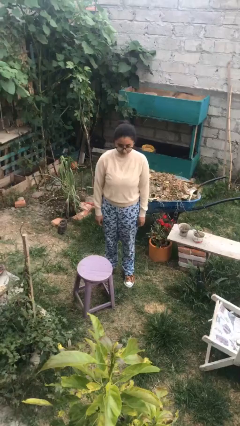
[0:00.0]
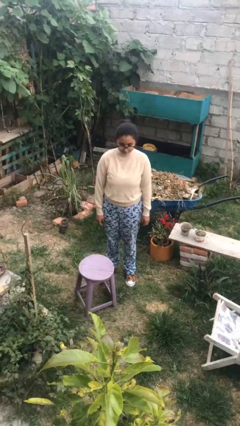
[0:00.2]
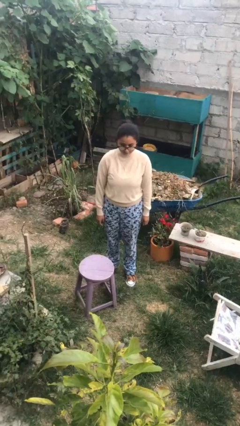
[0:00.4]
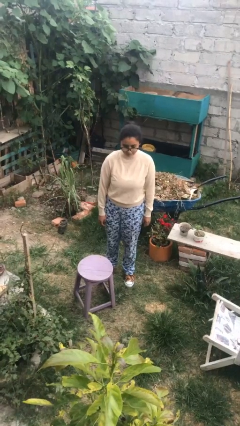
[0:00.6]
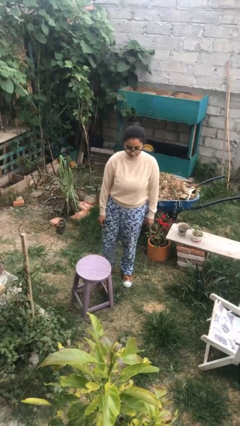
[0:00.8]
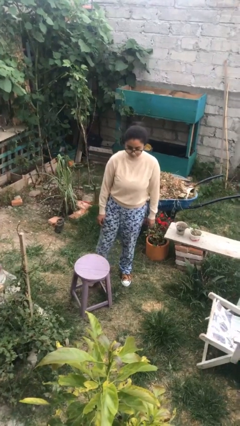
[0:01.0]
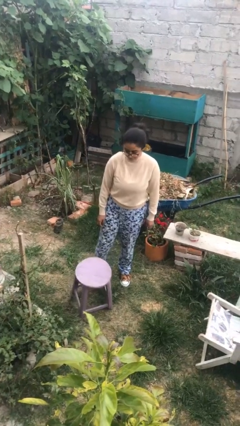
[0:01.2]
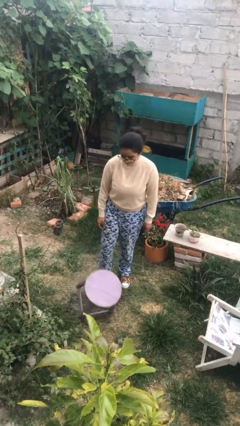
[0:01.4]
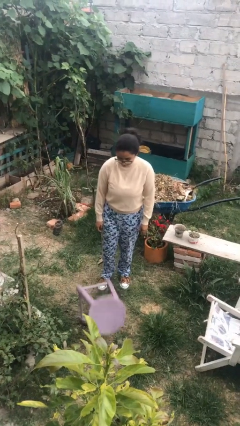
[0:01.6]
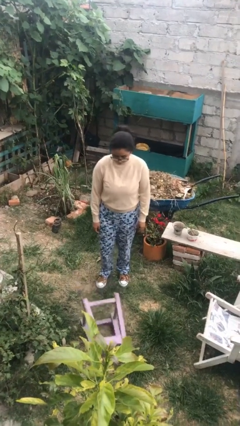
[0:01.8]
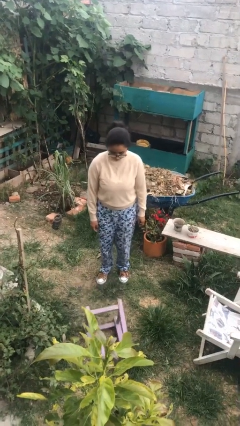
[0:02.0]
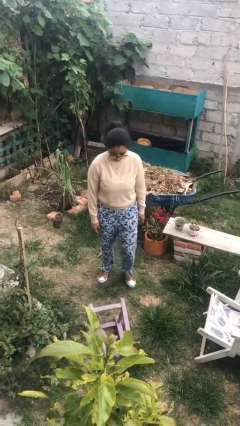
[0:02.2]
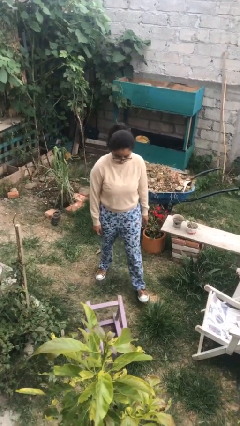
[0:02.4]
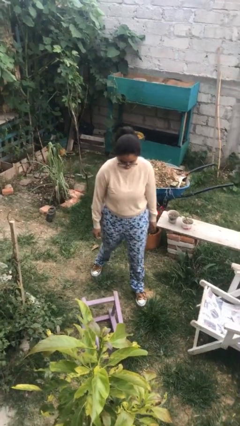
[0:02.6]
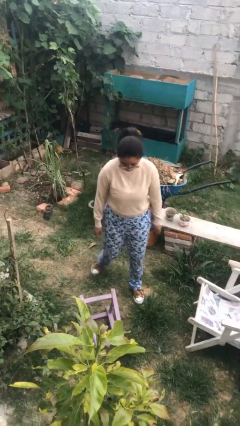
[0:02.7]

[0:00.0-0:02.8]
person knocks over furniture

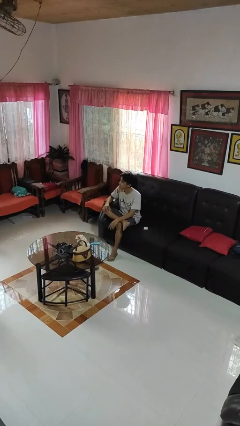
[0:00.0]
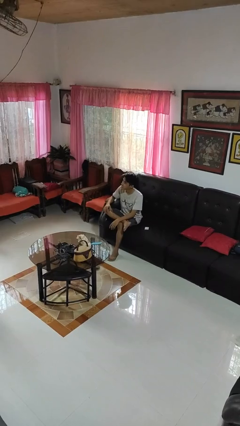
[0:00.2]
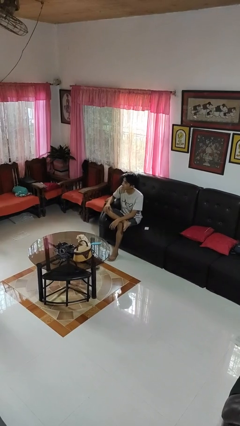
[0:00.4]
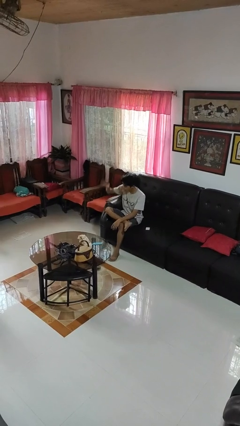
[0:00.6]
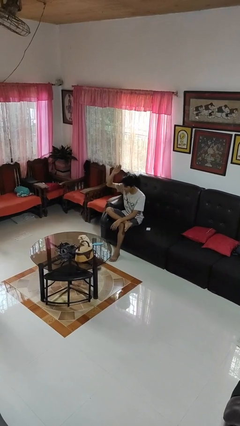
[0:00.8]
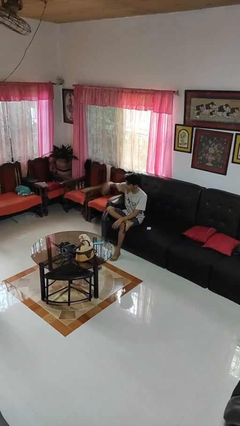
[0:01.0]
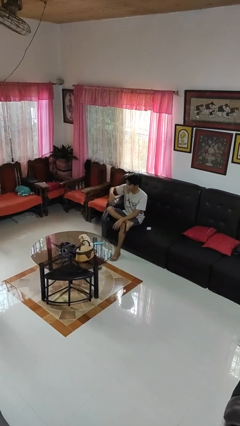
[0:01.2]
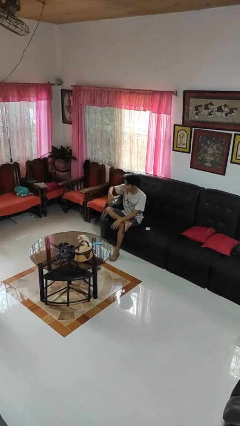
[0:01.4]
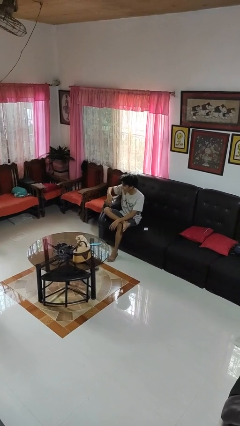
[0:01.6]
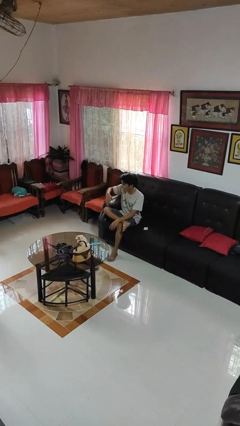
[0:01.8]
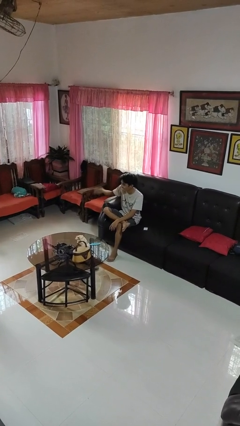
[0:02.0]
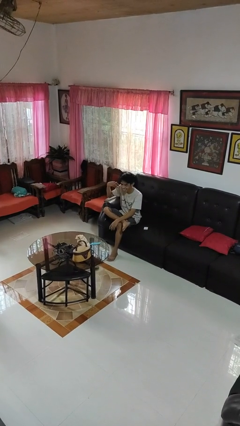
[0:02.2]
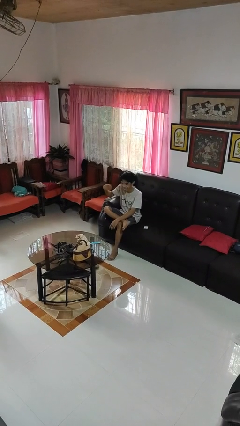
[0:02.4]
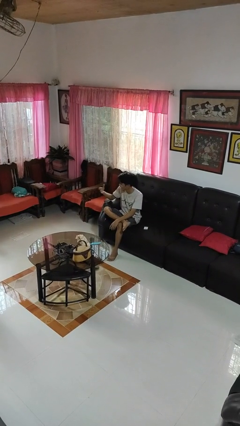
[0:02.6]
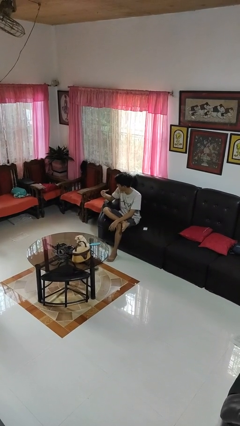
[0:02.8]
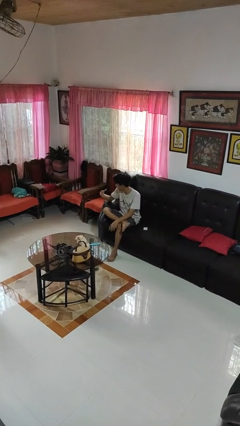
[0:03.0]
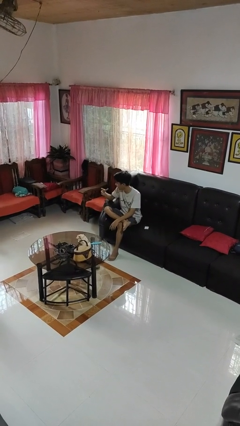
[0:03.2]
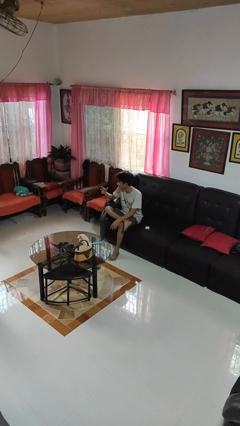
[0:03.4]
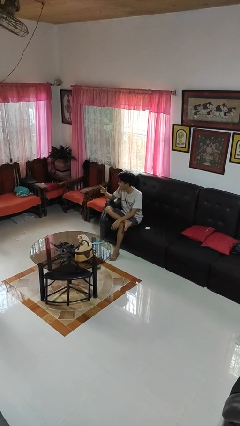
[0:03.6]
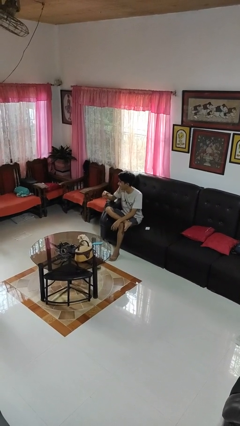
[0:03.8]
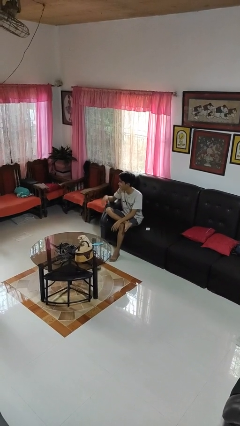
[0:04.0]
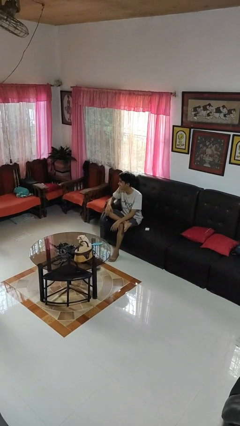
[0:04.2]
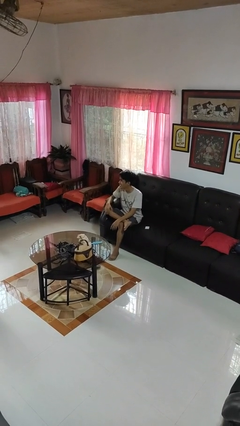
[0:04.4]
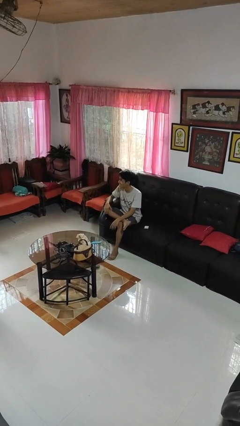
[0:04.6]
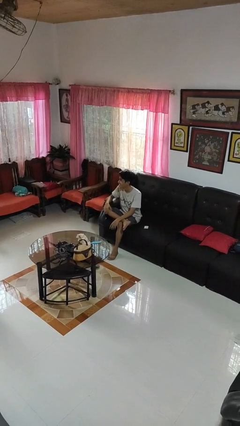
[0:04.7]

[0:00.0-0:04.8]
person gestures come here

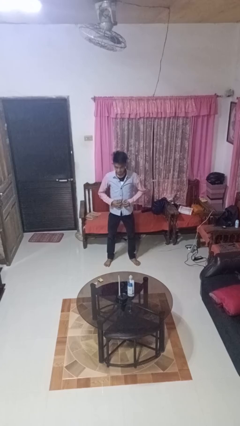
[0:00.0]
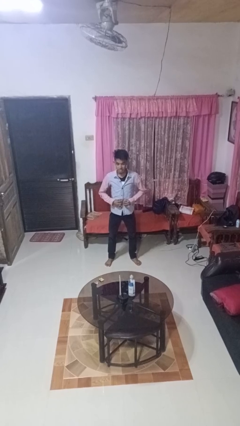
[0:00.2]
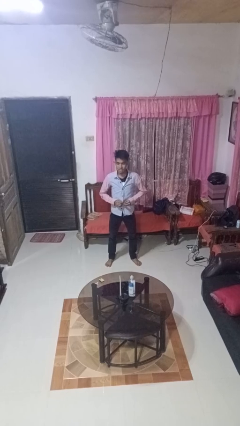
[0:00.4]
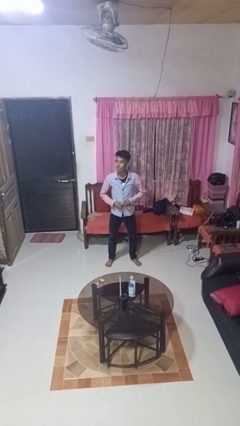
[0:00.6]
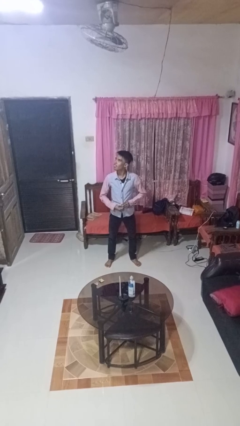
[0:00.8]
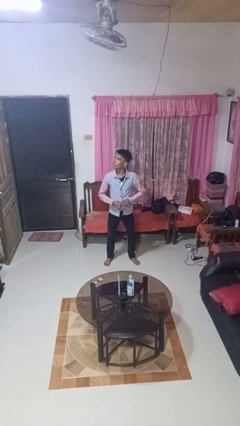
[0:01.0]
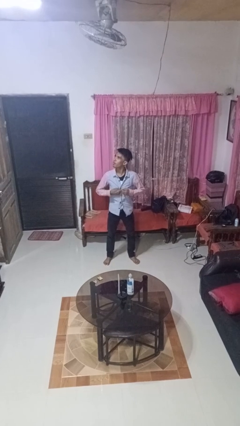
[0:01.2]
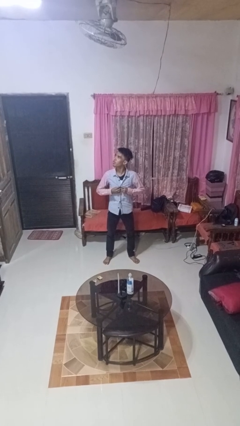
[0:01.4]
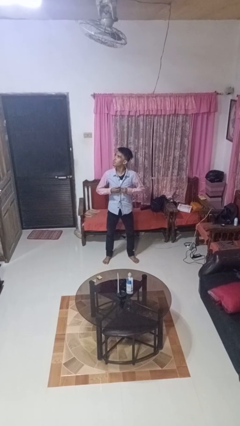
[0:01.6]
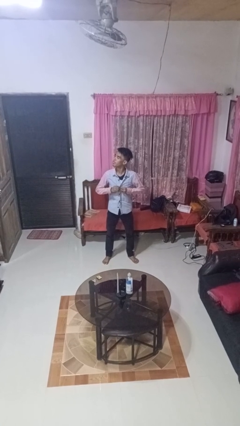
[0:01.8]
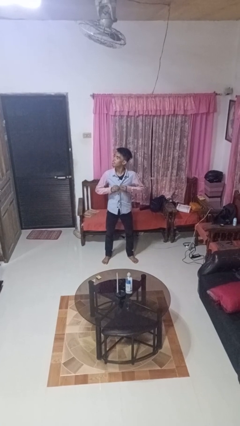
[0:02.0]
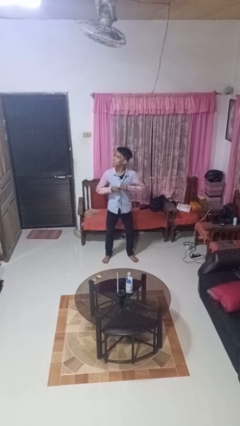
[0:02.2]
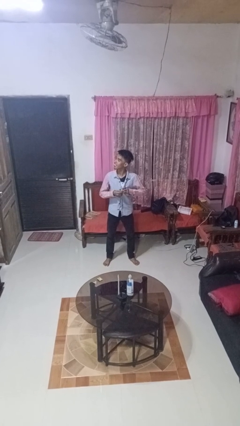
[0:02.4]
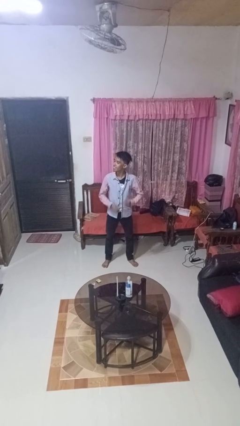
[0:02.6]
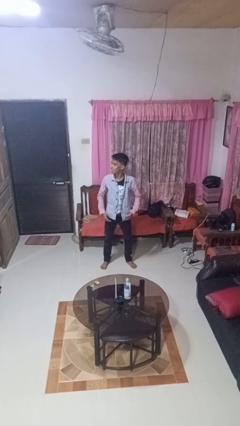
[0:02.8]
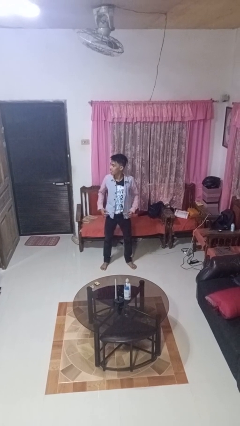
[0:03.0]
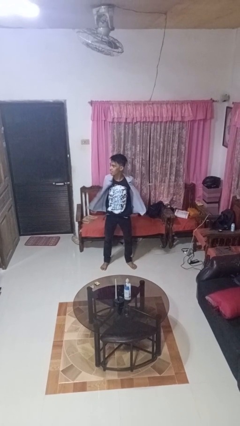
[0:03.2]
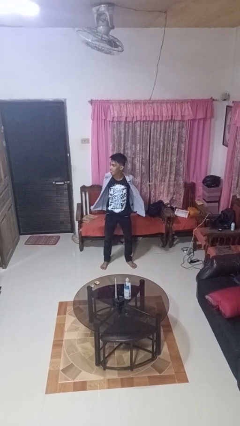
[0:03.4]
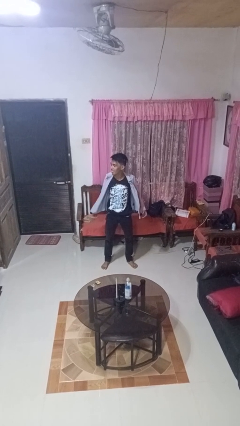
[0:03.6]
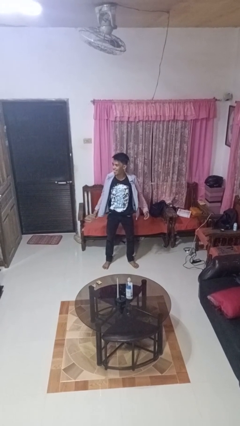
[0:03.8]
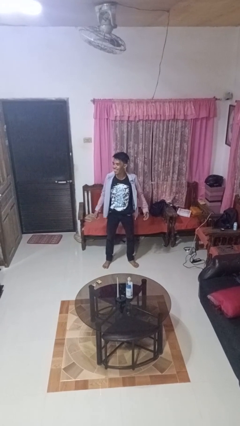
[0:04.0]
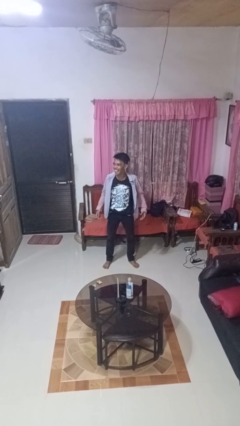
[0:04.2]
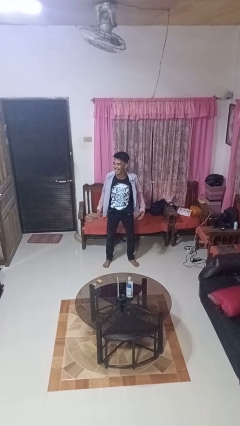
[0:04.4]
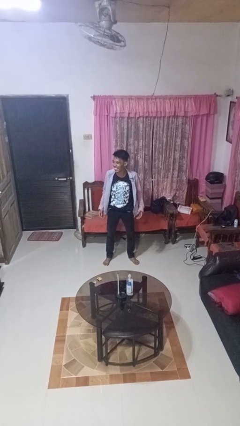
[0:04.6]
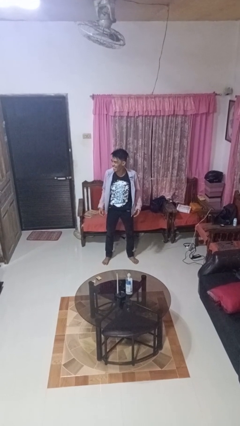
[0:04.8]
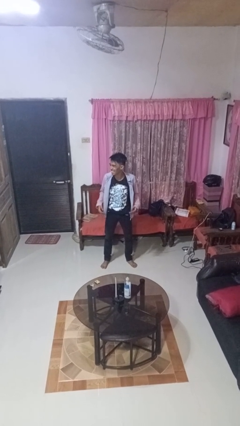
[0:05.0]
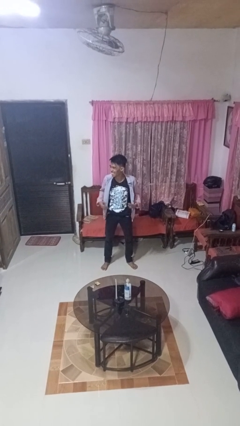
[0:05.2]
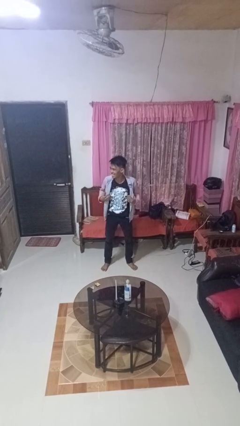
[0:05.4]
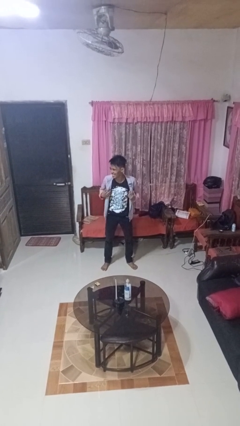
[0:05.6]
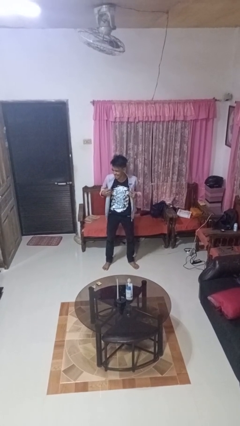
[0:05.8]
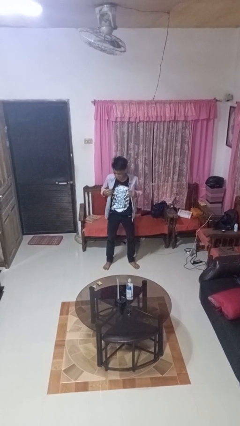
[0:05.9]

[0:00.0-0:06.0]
person unbuttons shirt

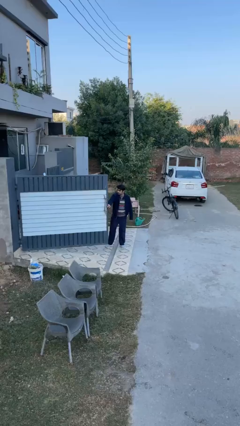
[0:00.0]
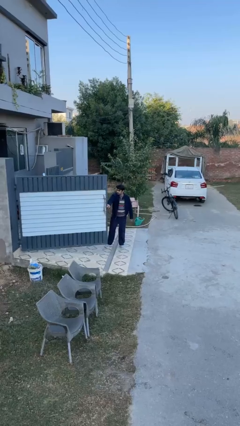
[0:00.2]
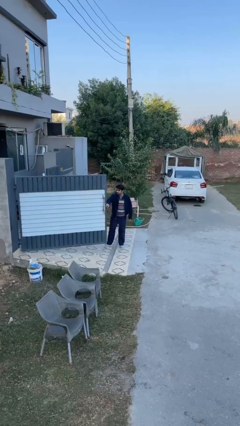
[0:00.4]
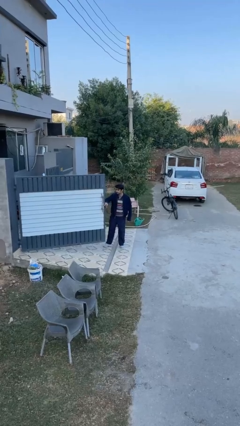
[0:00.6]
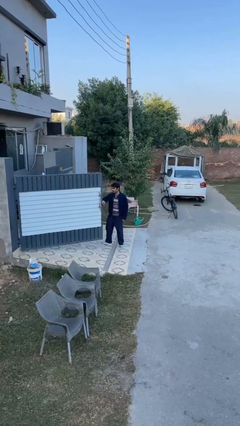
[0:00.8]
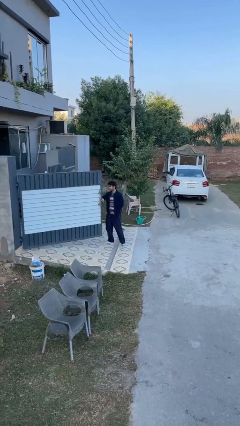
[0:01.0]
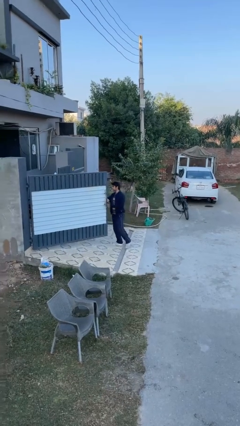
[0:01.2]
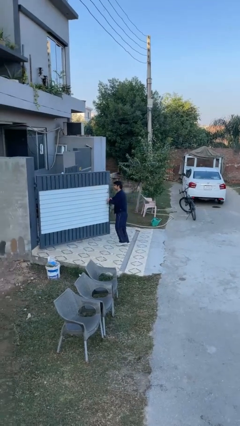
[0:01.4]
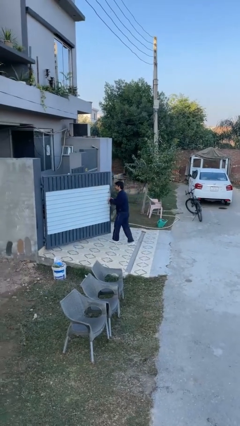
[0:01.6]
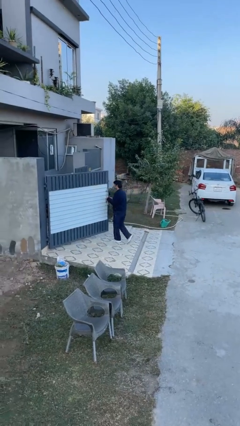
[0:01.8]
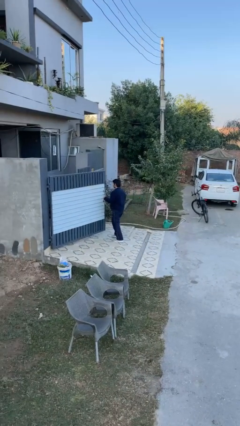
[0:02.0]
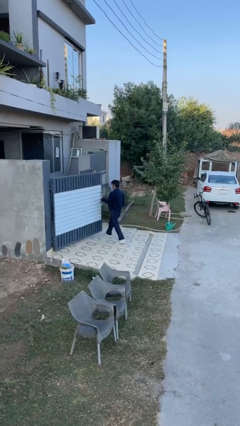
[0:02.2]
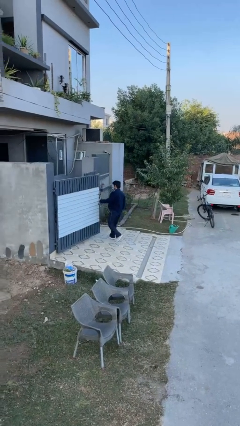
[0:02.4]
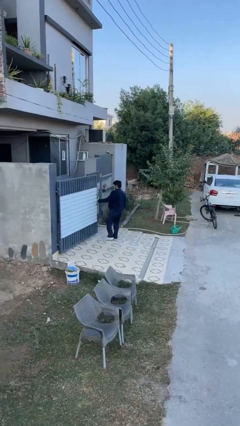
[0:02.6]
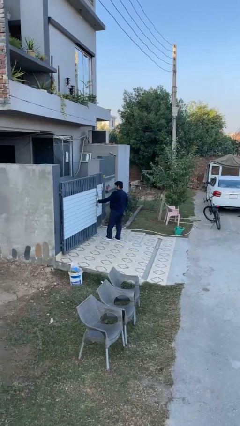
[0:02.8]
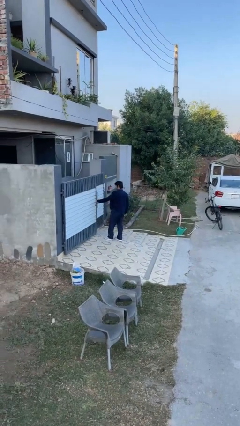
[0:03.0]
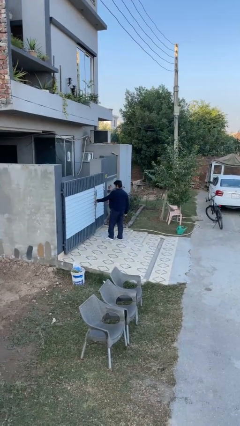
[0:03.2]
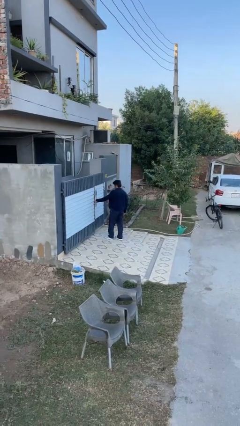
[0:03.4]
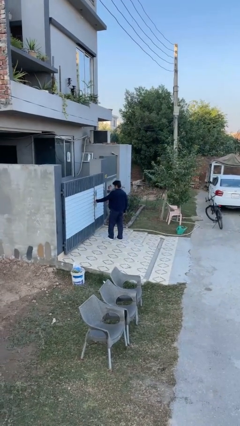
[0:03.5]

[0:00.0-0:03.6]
person closes facility door
